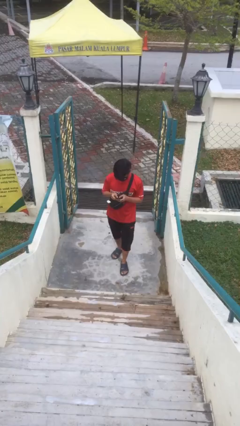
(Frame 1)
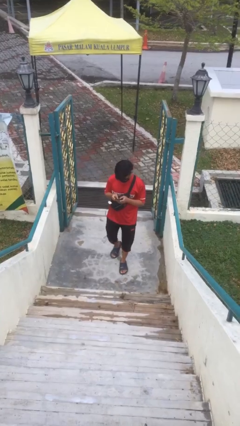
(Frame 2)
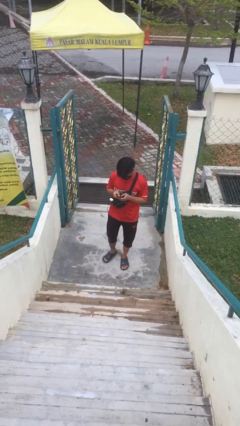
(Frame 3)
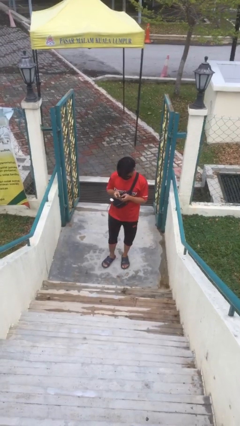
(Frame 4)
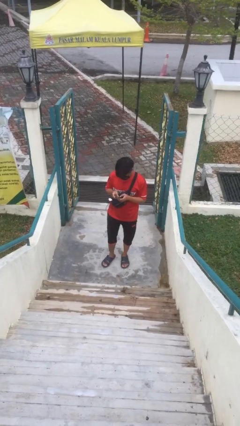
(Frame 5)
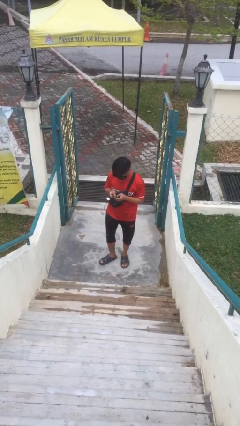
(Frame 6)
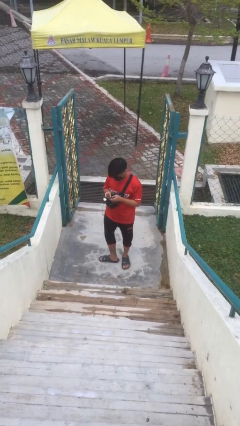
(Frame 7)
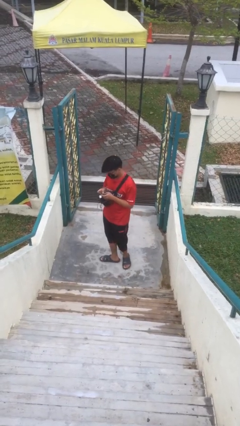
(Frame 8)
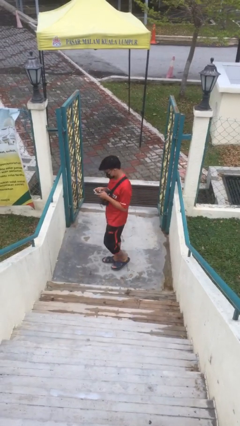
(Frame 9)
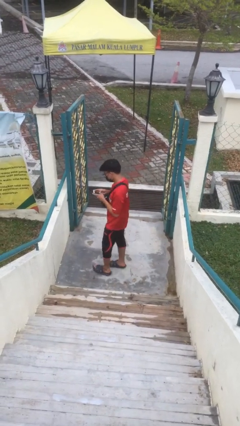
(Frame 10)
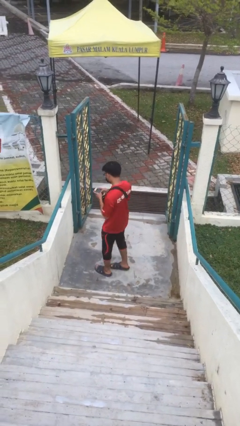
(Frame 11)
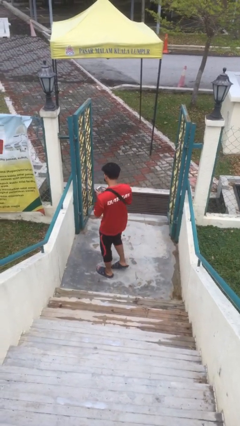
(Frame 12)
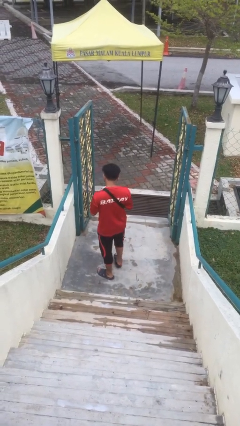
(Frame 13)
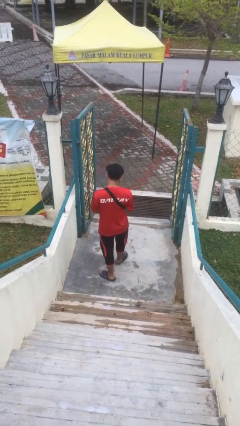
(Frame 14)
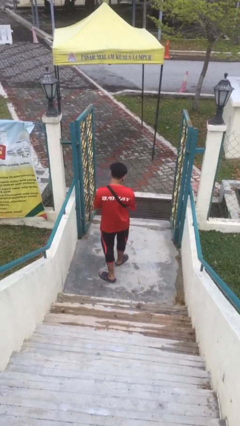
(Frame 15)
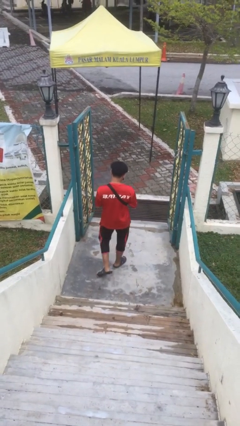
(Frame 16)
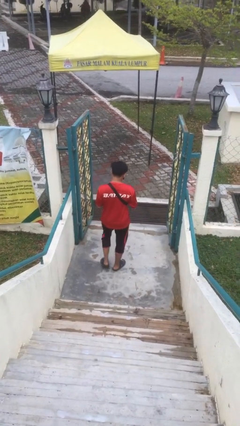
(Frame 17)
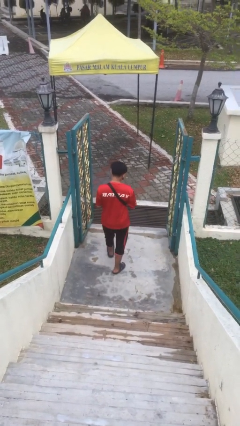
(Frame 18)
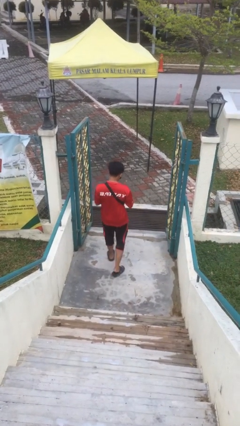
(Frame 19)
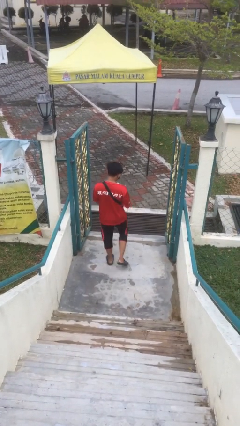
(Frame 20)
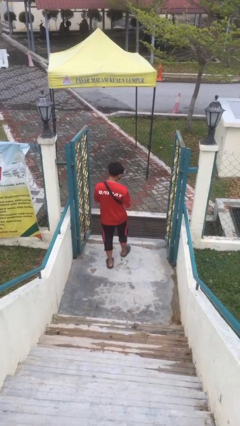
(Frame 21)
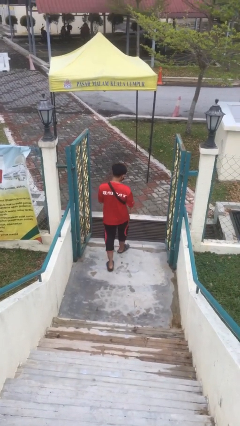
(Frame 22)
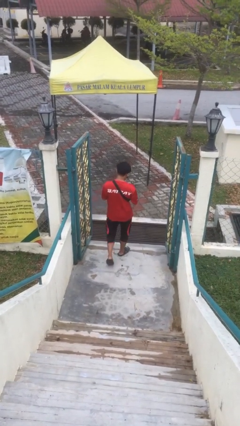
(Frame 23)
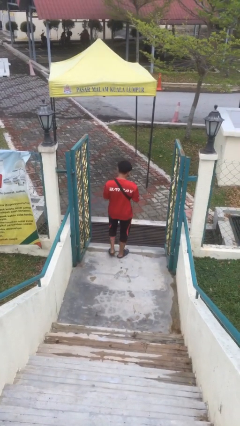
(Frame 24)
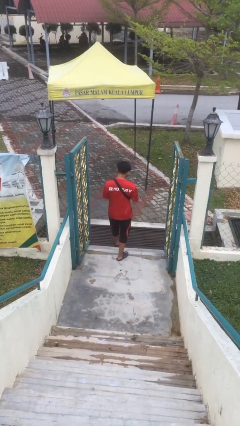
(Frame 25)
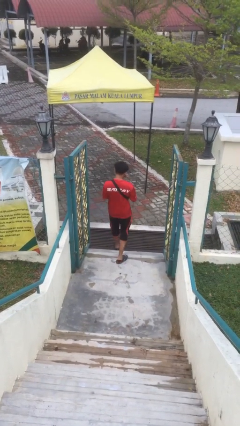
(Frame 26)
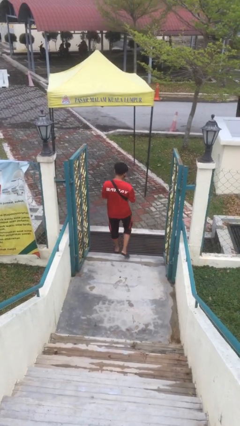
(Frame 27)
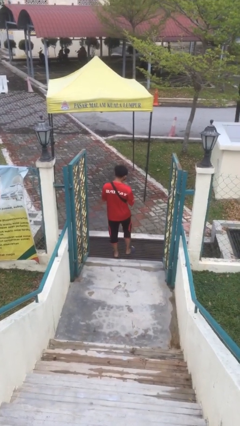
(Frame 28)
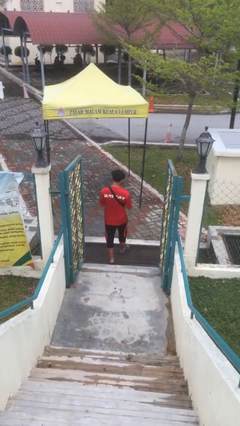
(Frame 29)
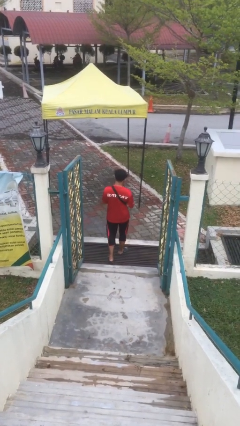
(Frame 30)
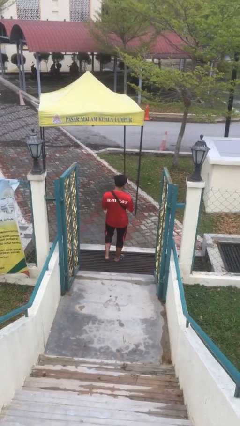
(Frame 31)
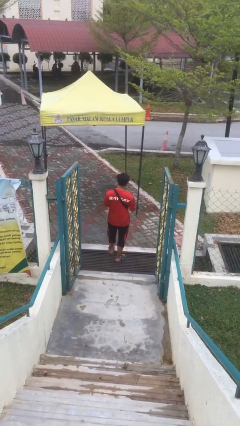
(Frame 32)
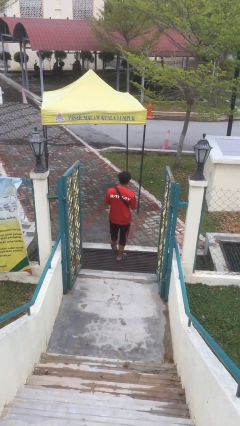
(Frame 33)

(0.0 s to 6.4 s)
person exits scene through structure

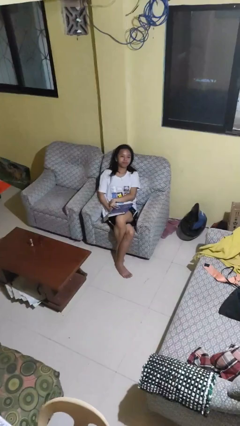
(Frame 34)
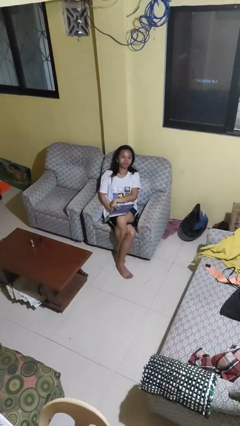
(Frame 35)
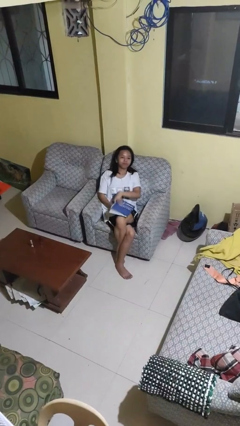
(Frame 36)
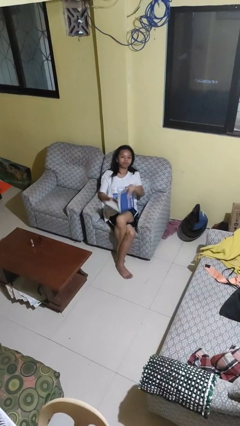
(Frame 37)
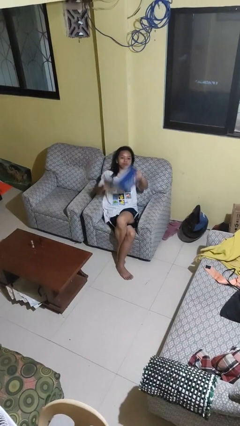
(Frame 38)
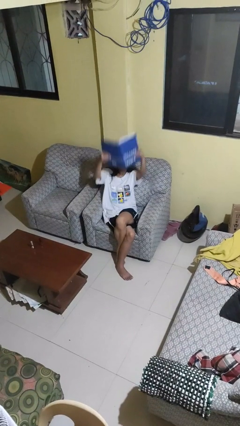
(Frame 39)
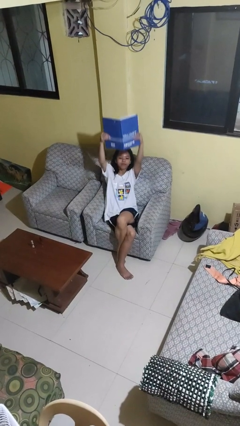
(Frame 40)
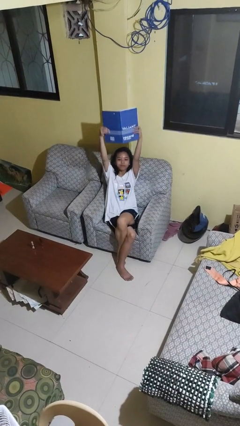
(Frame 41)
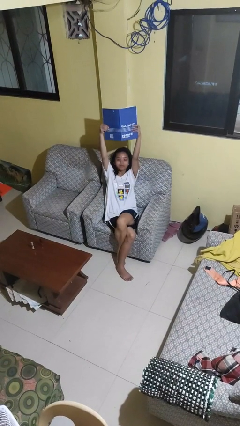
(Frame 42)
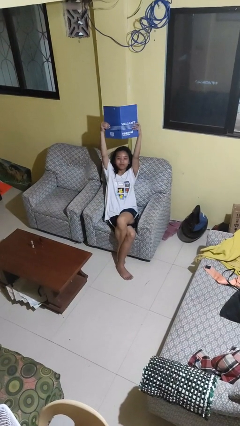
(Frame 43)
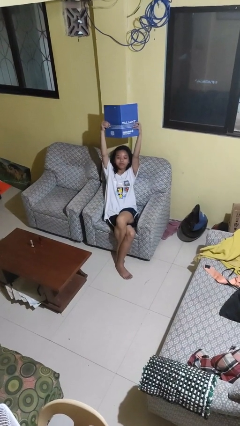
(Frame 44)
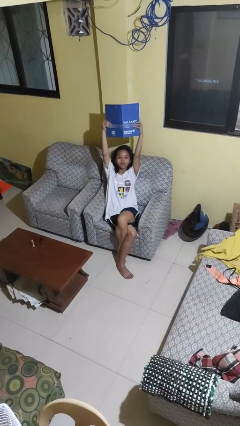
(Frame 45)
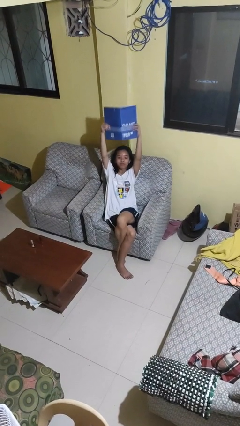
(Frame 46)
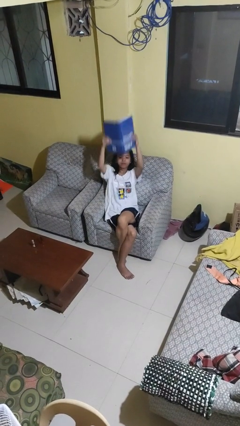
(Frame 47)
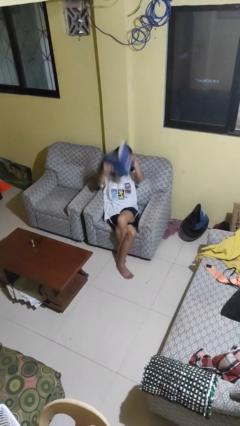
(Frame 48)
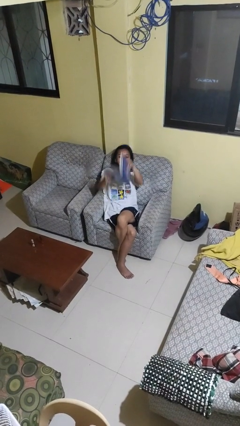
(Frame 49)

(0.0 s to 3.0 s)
person holds object above head

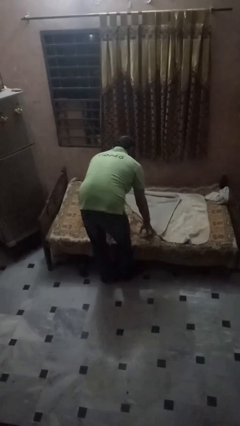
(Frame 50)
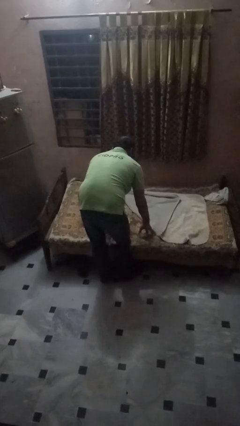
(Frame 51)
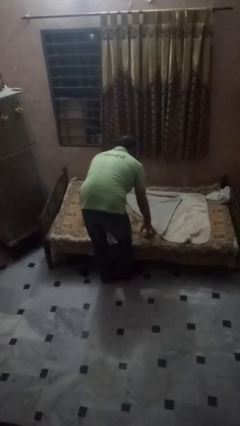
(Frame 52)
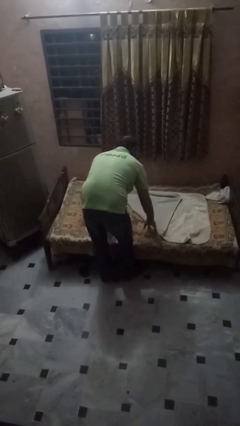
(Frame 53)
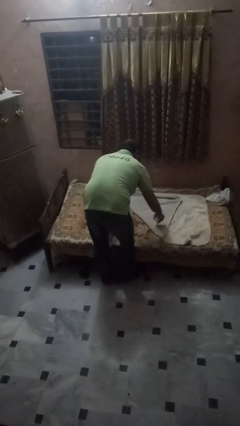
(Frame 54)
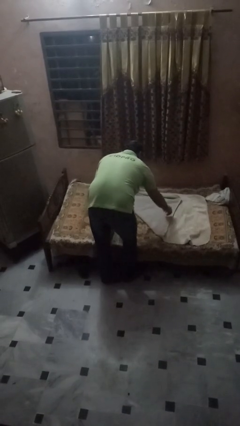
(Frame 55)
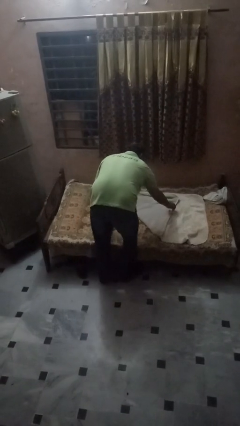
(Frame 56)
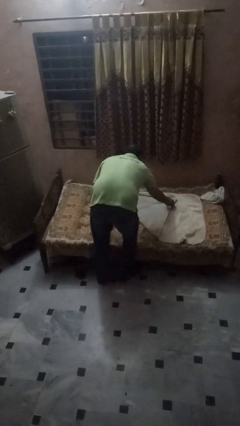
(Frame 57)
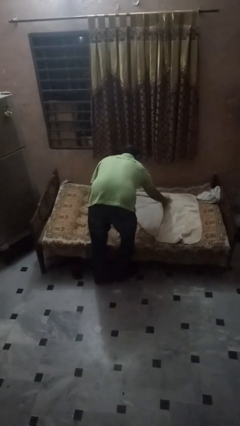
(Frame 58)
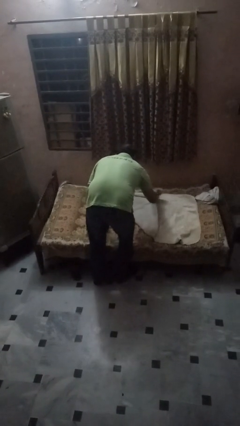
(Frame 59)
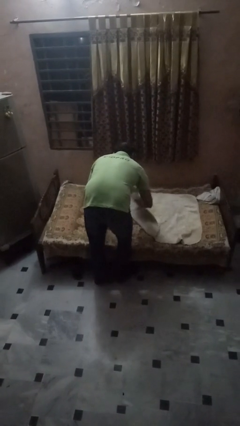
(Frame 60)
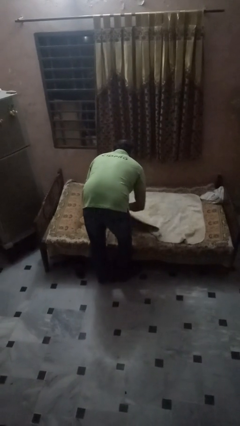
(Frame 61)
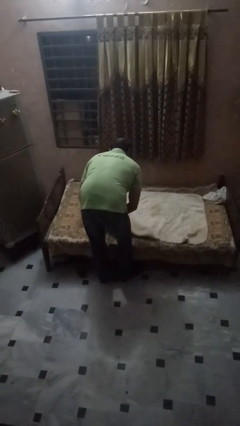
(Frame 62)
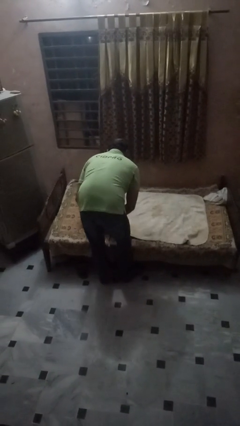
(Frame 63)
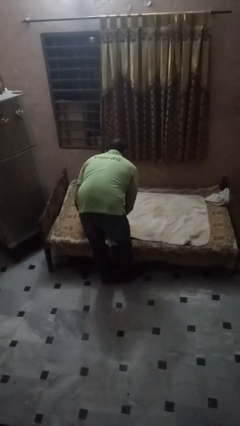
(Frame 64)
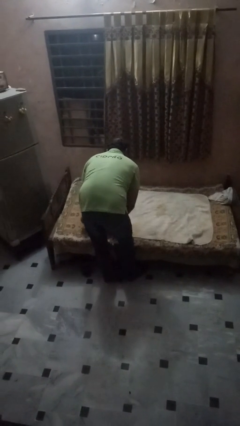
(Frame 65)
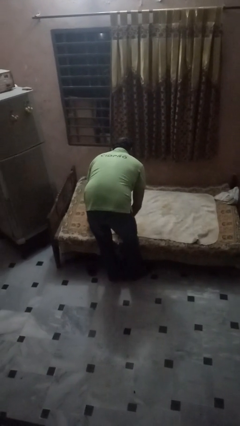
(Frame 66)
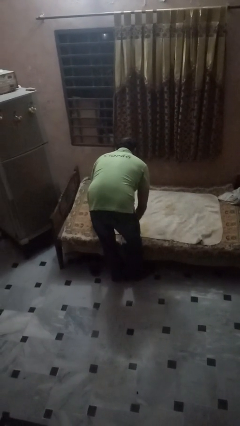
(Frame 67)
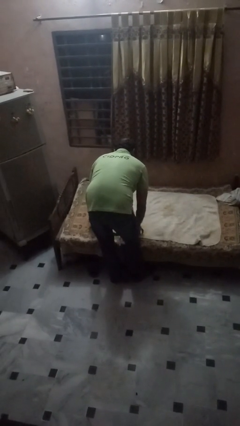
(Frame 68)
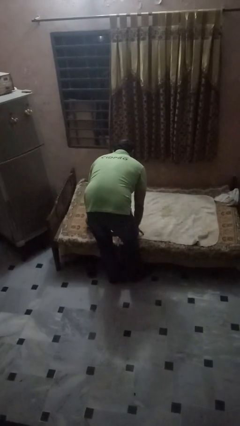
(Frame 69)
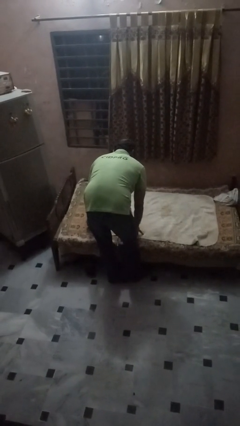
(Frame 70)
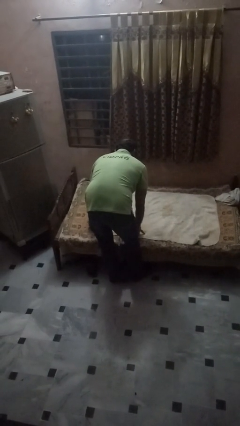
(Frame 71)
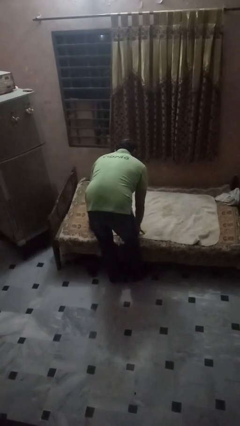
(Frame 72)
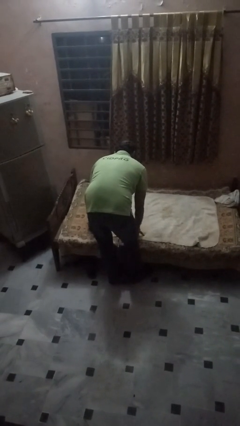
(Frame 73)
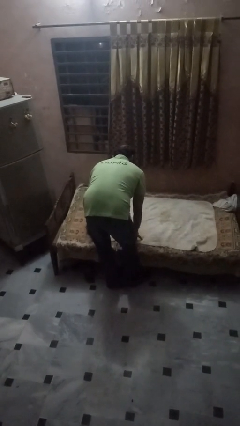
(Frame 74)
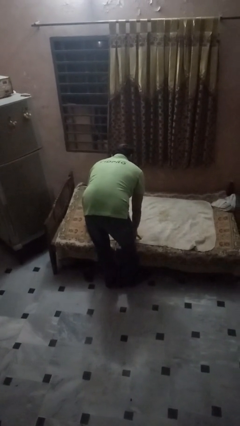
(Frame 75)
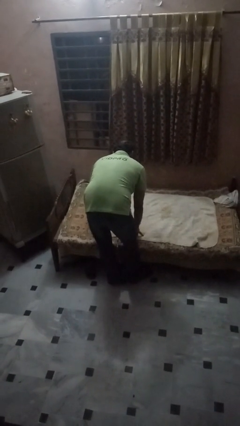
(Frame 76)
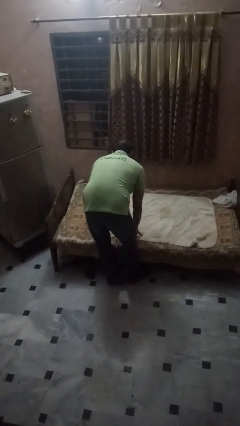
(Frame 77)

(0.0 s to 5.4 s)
person unfolds blanket

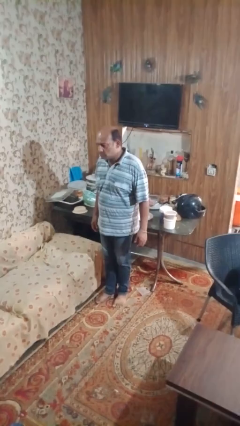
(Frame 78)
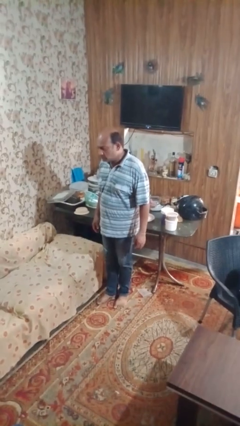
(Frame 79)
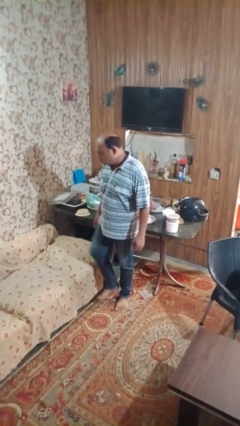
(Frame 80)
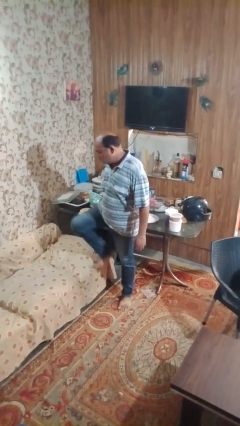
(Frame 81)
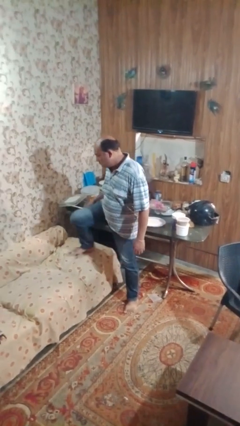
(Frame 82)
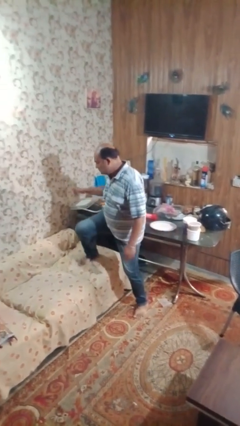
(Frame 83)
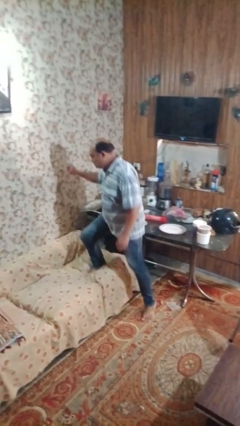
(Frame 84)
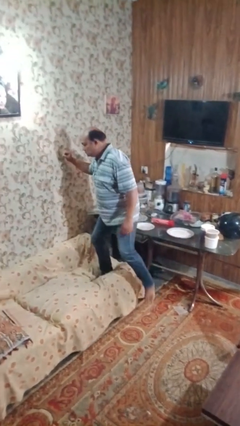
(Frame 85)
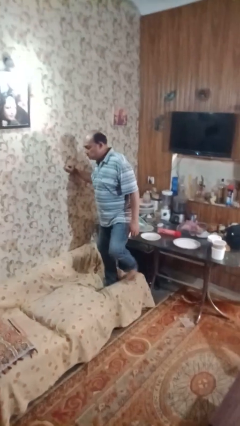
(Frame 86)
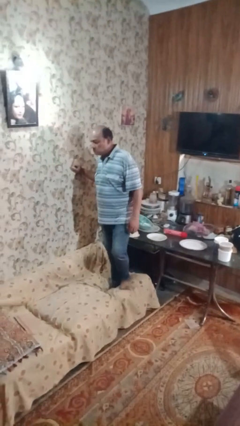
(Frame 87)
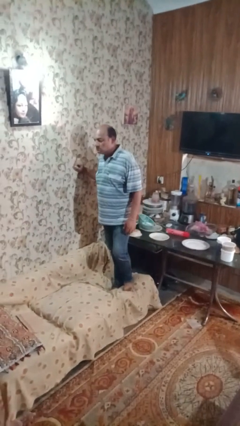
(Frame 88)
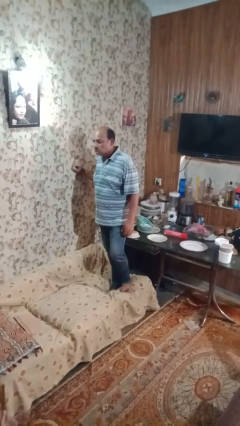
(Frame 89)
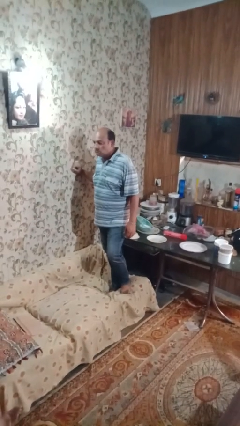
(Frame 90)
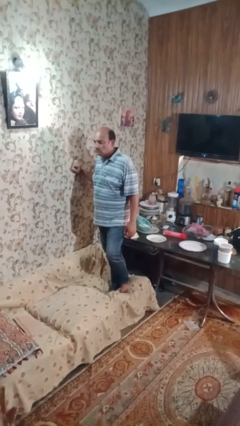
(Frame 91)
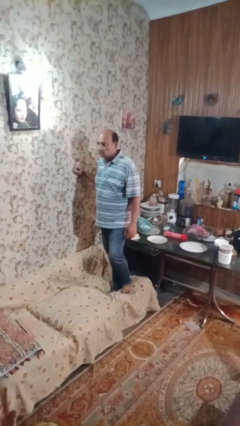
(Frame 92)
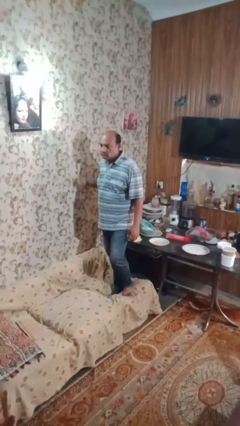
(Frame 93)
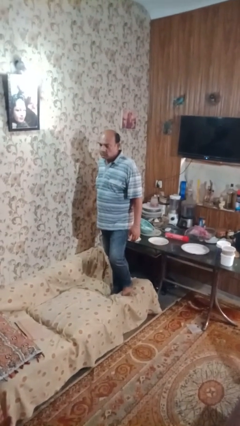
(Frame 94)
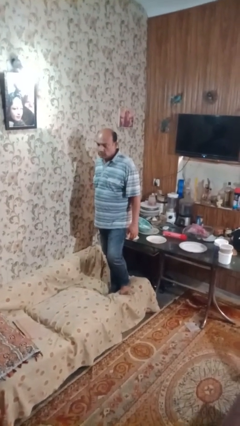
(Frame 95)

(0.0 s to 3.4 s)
person climbs on couch
